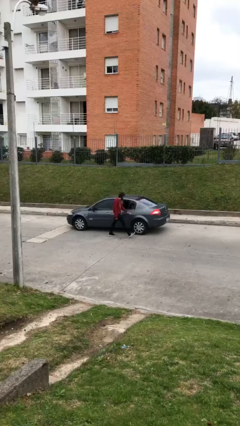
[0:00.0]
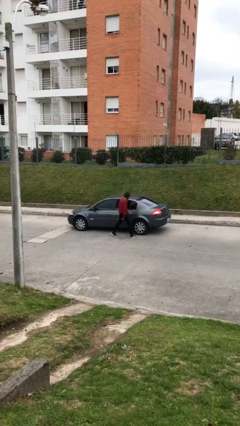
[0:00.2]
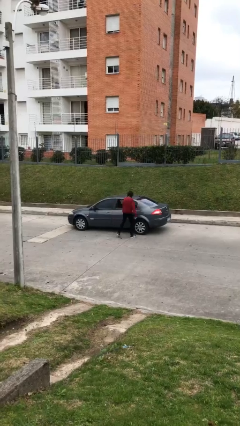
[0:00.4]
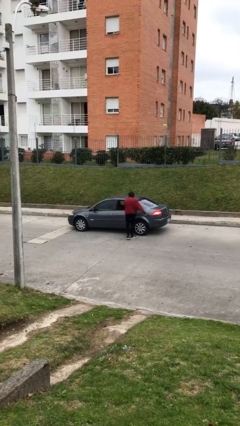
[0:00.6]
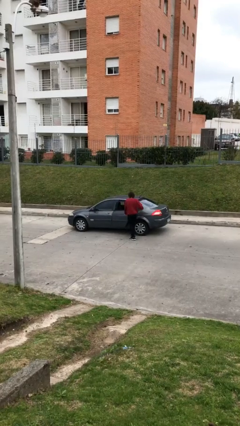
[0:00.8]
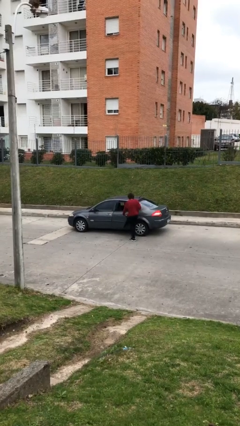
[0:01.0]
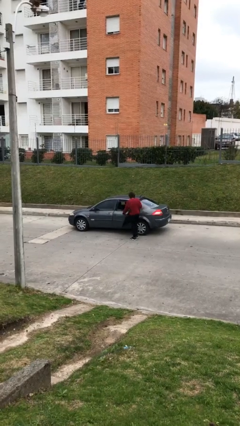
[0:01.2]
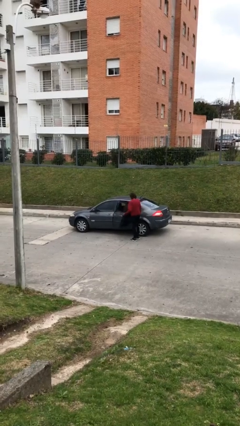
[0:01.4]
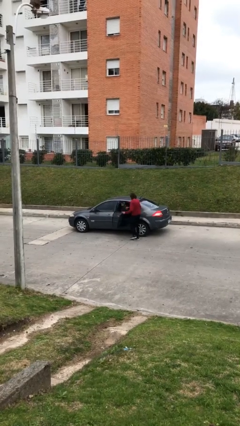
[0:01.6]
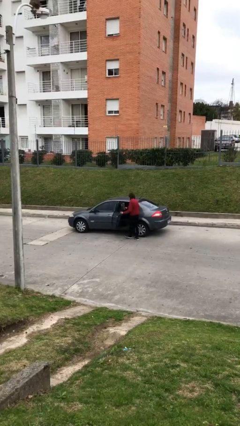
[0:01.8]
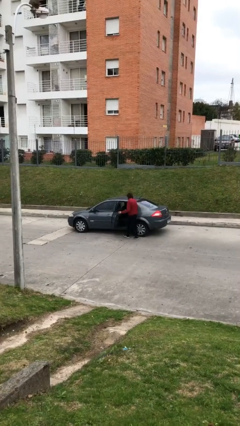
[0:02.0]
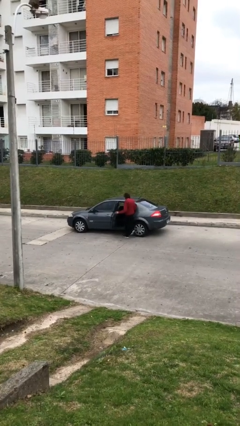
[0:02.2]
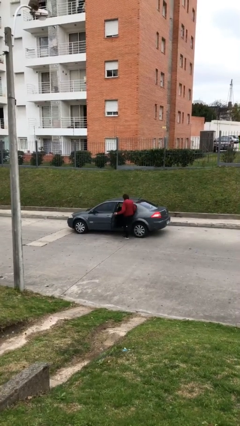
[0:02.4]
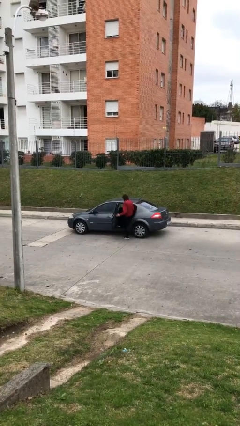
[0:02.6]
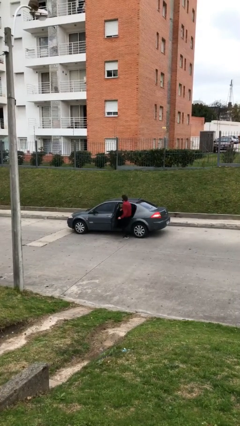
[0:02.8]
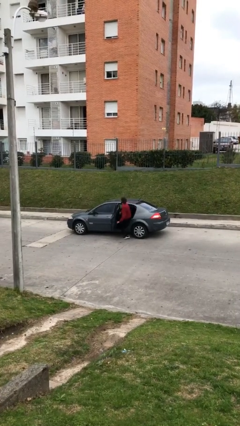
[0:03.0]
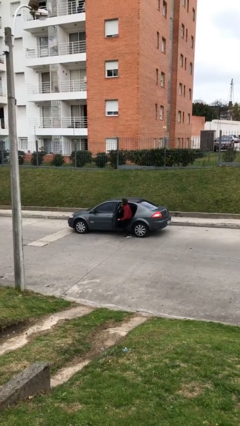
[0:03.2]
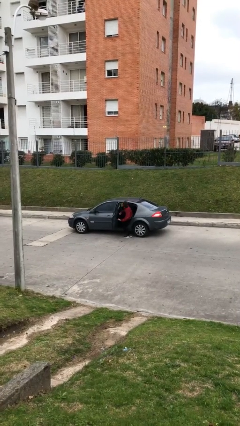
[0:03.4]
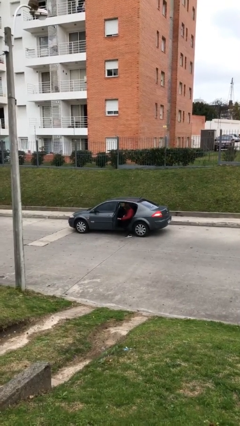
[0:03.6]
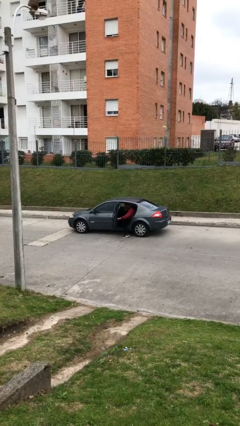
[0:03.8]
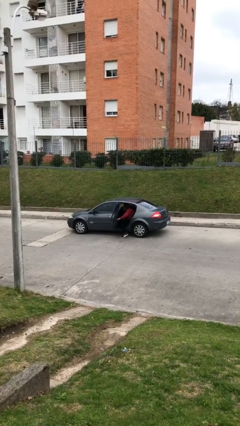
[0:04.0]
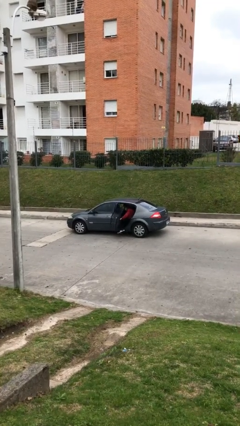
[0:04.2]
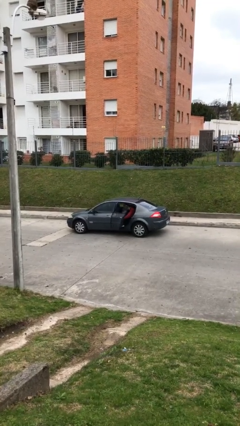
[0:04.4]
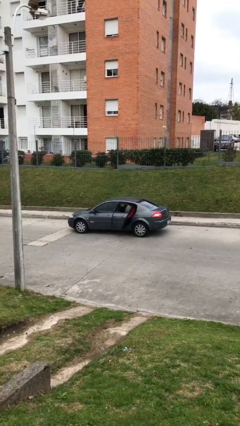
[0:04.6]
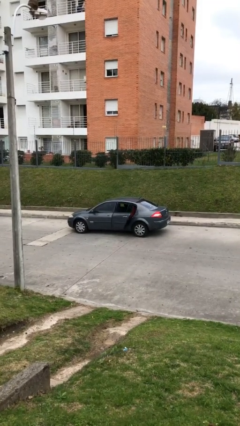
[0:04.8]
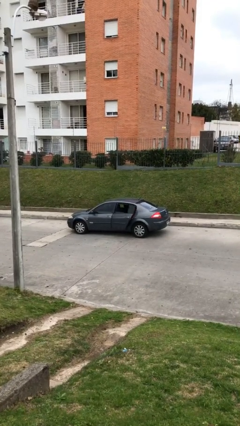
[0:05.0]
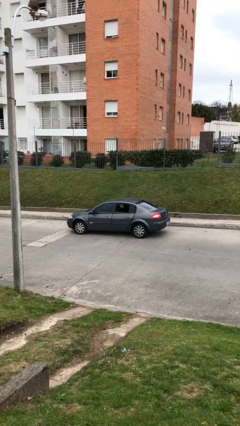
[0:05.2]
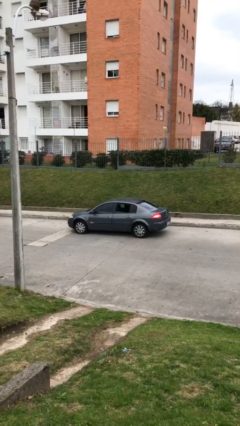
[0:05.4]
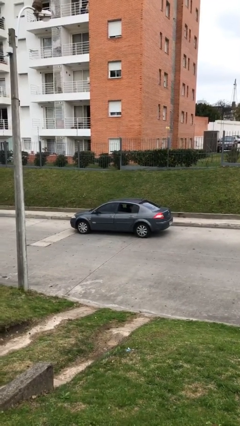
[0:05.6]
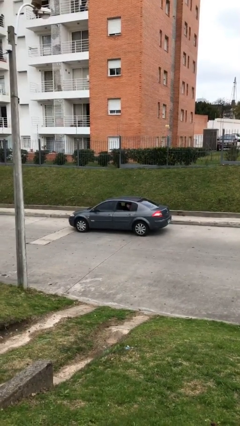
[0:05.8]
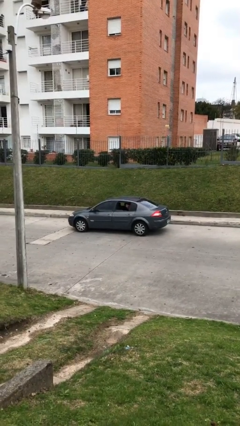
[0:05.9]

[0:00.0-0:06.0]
car picks up person

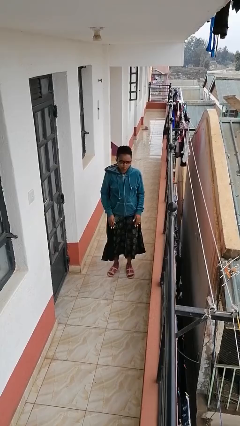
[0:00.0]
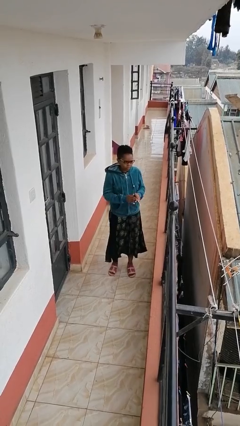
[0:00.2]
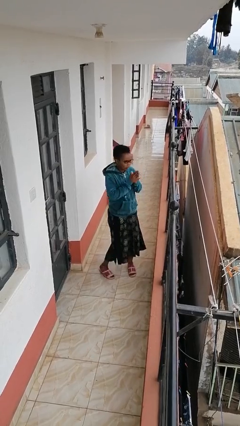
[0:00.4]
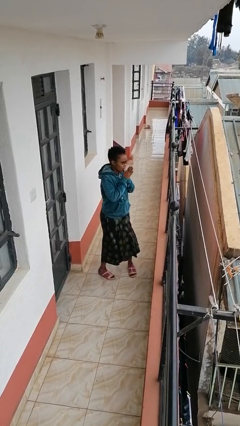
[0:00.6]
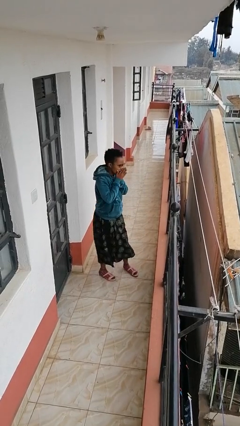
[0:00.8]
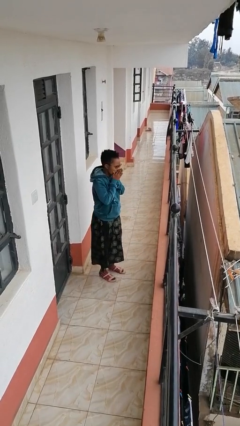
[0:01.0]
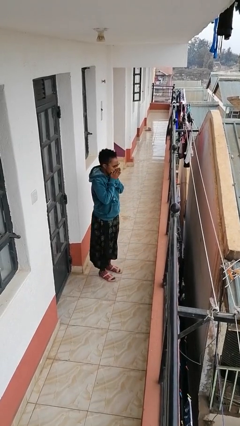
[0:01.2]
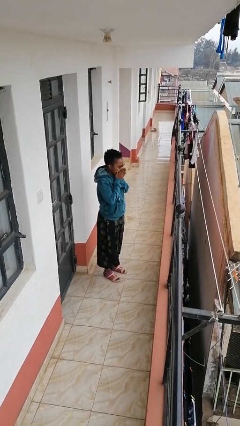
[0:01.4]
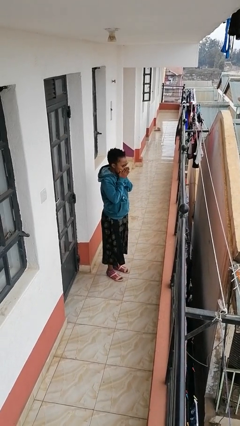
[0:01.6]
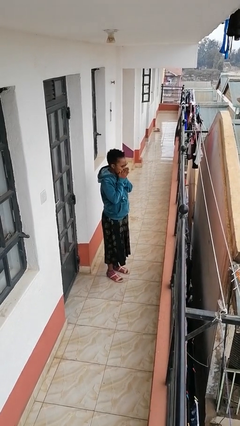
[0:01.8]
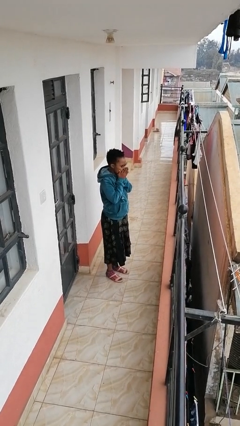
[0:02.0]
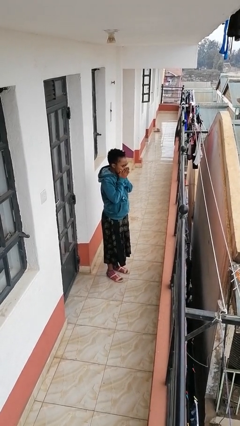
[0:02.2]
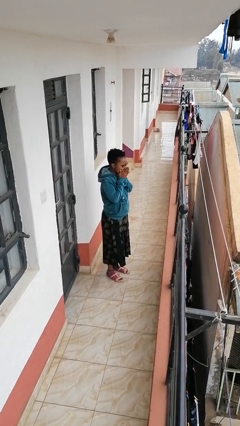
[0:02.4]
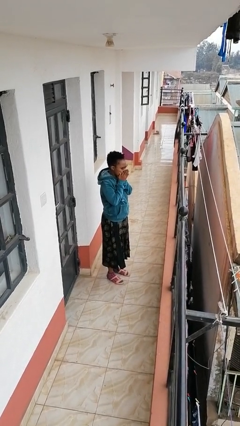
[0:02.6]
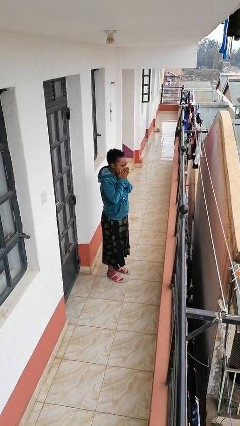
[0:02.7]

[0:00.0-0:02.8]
person blows into hands

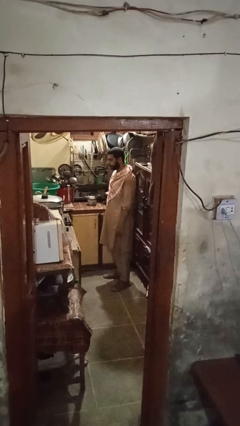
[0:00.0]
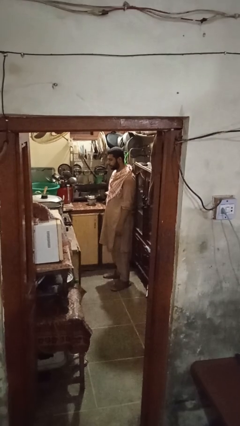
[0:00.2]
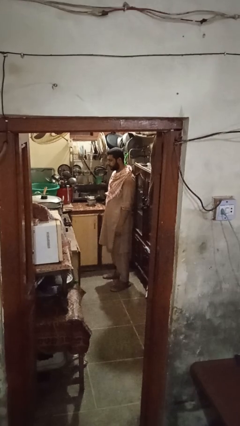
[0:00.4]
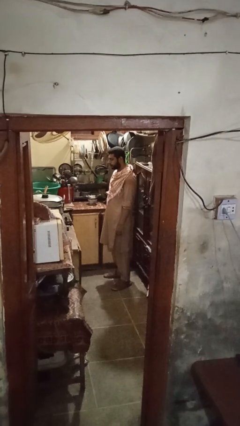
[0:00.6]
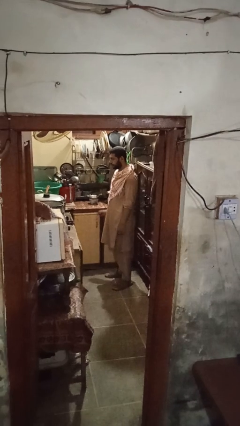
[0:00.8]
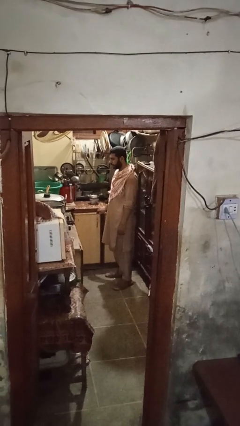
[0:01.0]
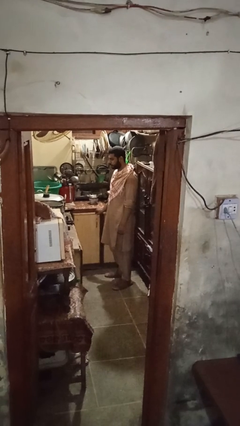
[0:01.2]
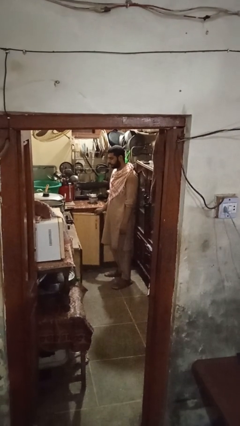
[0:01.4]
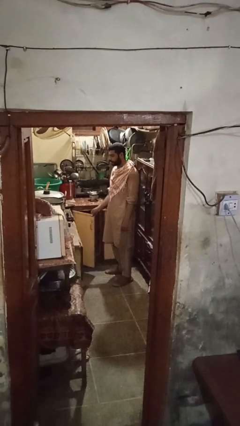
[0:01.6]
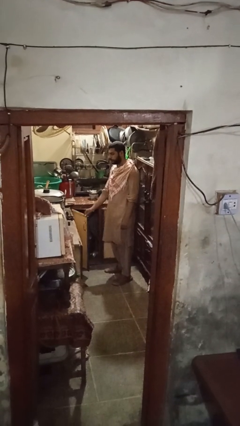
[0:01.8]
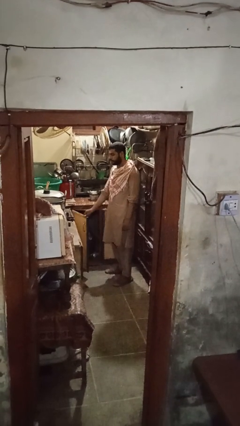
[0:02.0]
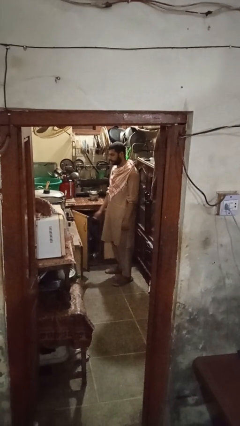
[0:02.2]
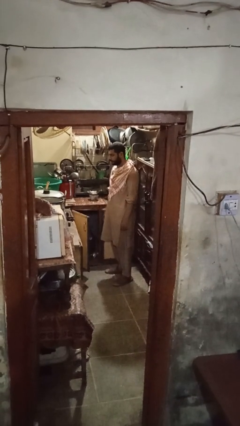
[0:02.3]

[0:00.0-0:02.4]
person opens cabinet

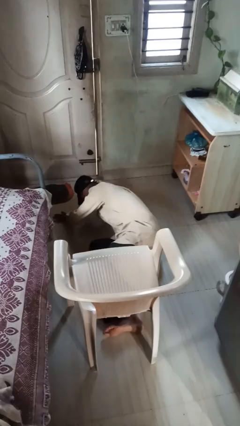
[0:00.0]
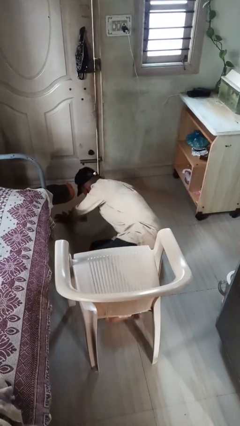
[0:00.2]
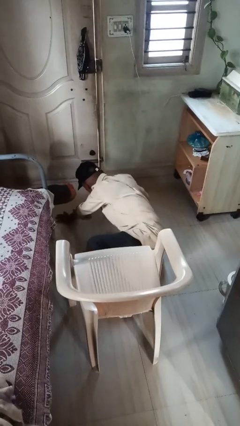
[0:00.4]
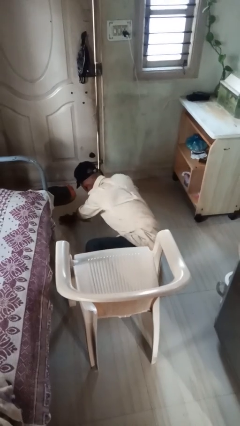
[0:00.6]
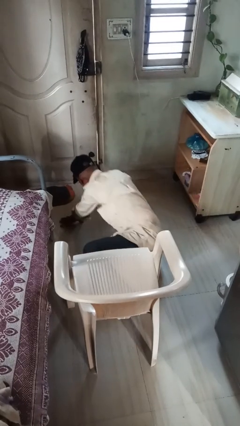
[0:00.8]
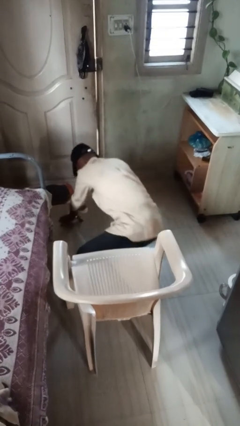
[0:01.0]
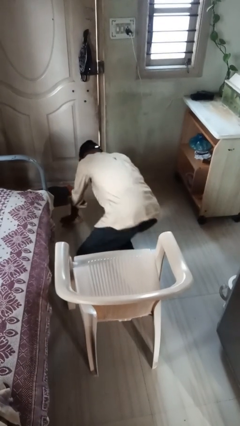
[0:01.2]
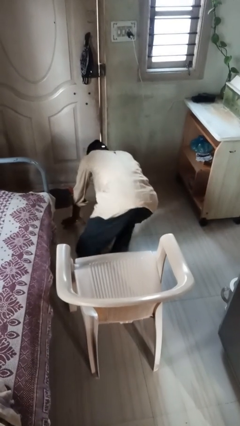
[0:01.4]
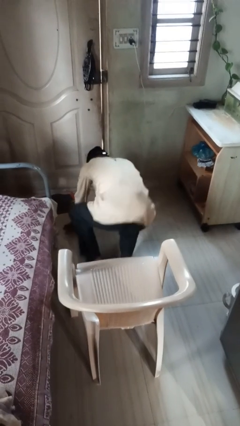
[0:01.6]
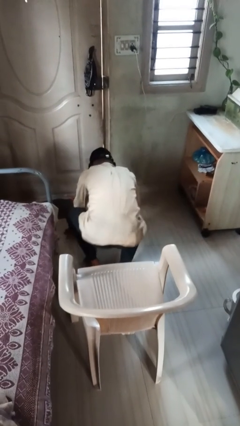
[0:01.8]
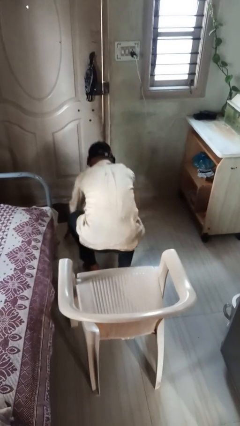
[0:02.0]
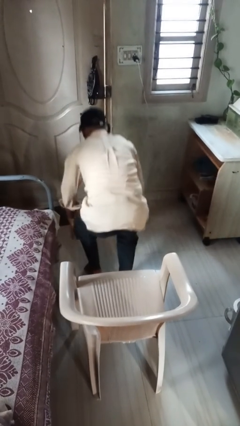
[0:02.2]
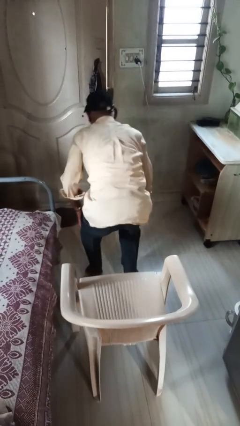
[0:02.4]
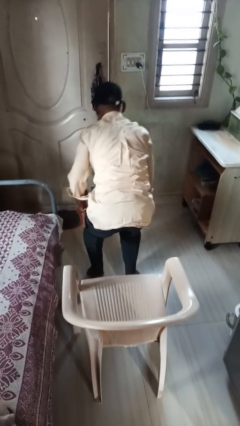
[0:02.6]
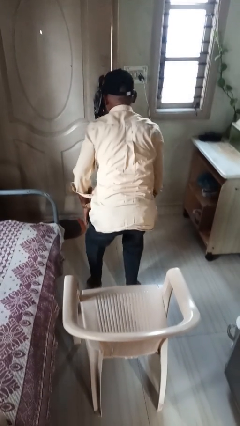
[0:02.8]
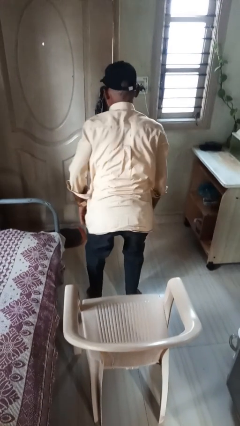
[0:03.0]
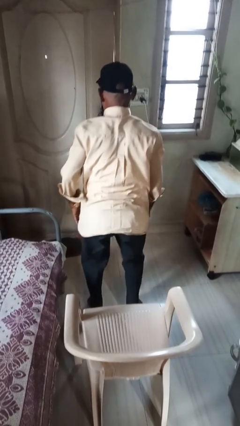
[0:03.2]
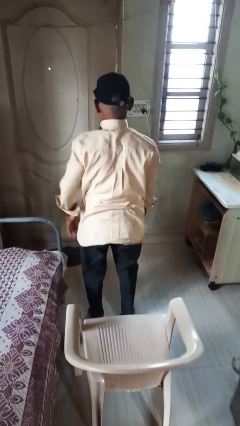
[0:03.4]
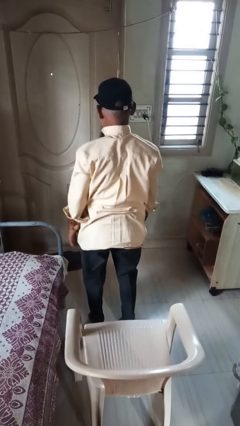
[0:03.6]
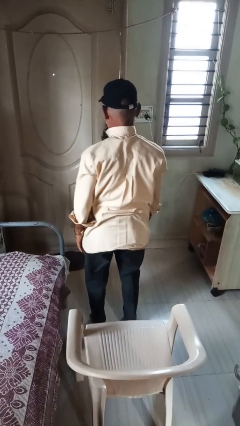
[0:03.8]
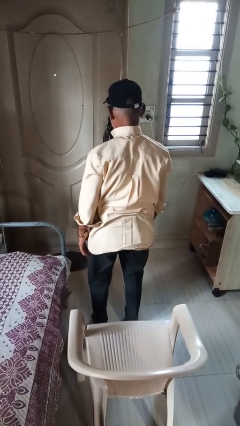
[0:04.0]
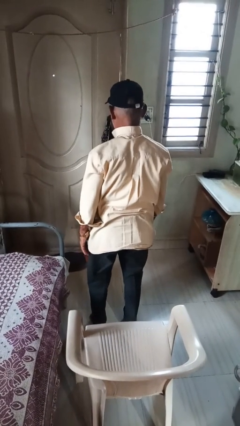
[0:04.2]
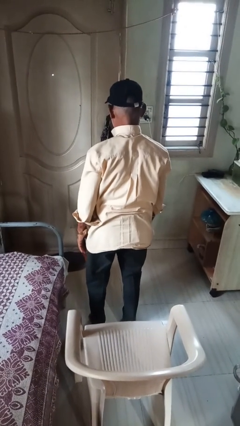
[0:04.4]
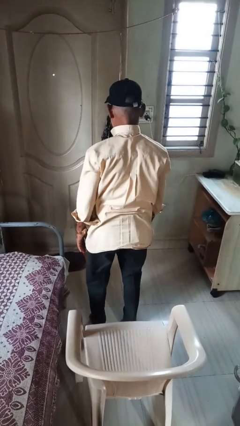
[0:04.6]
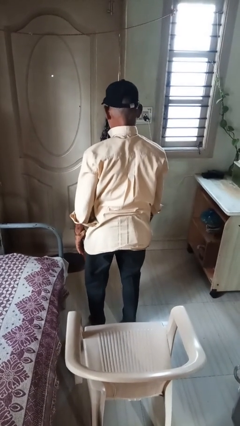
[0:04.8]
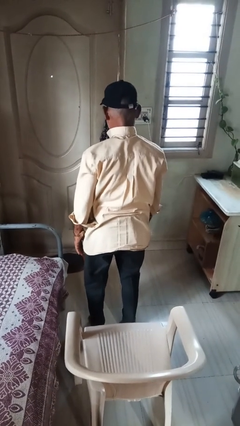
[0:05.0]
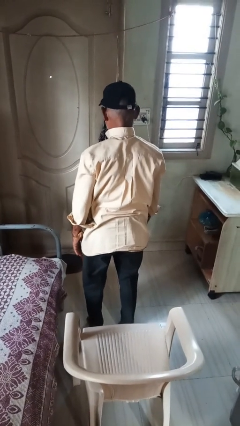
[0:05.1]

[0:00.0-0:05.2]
person stands up from floor

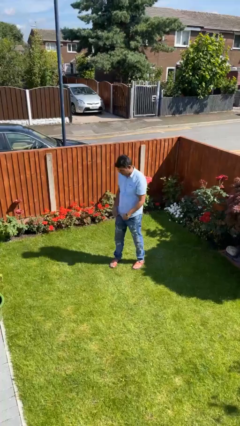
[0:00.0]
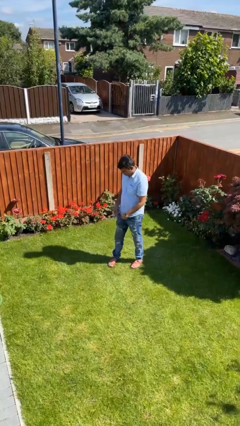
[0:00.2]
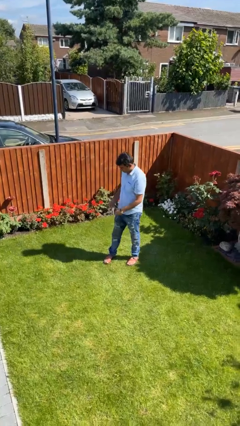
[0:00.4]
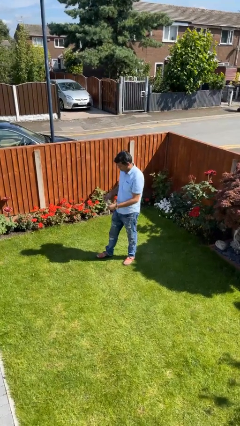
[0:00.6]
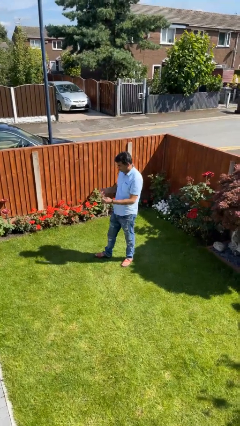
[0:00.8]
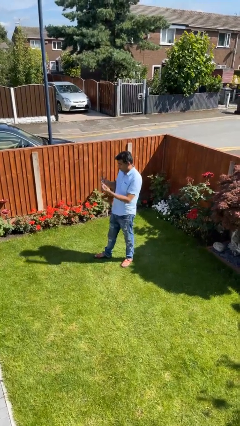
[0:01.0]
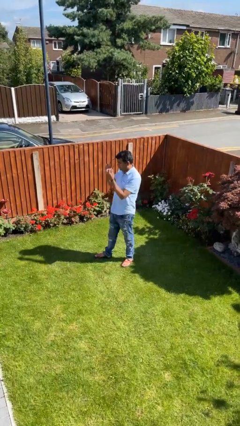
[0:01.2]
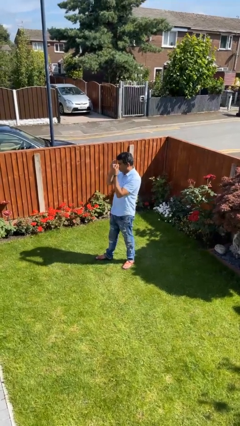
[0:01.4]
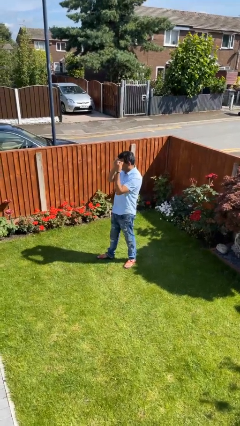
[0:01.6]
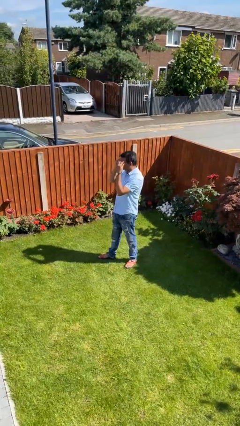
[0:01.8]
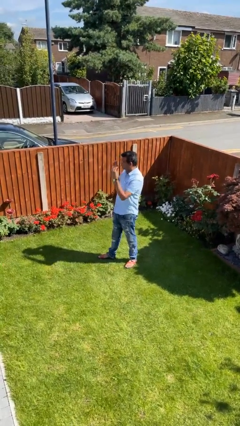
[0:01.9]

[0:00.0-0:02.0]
person puts on glasses
